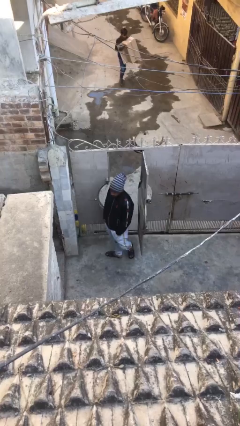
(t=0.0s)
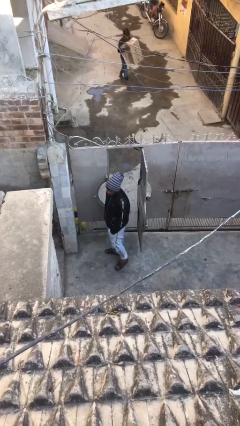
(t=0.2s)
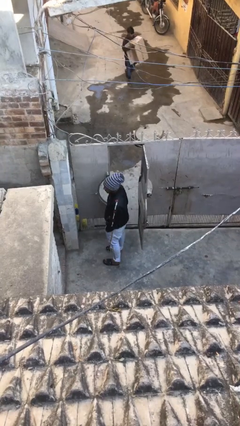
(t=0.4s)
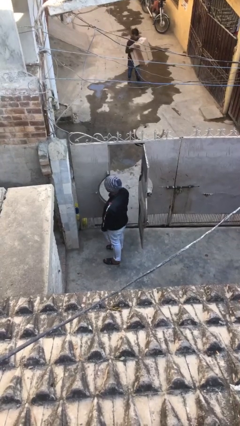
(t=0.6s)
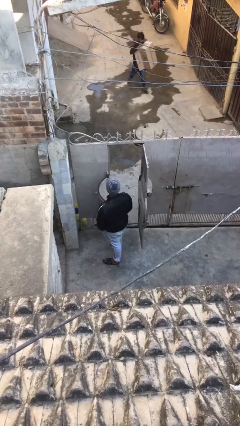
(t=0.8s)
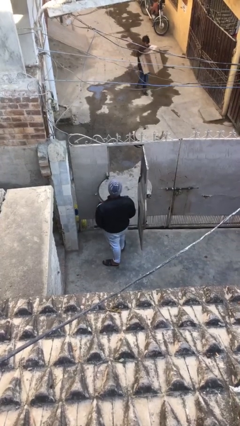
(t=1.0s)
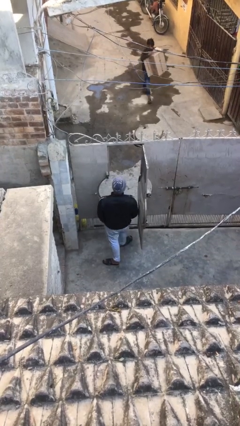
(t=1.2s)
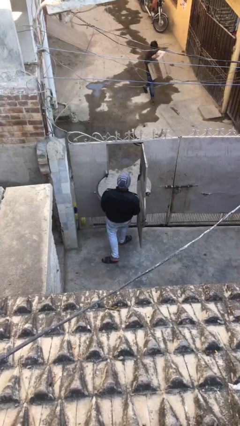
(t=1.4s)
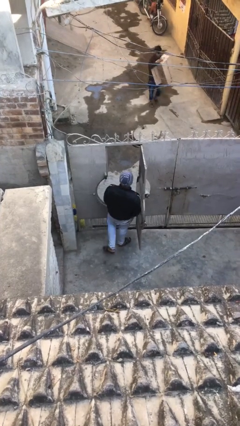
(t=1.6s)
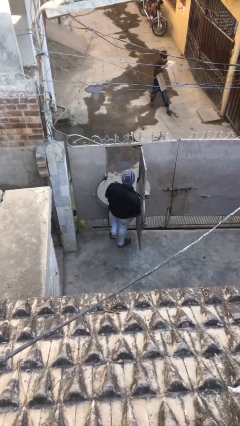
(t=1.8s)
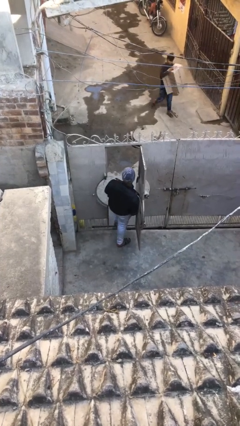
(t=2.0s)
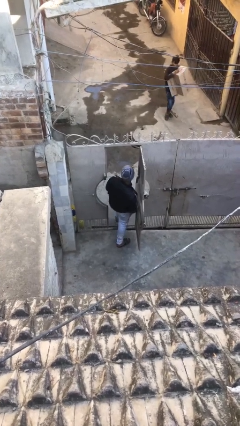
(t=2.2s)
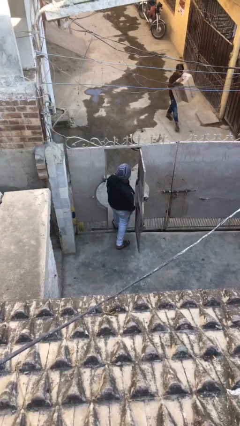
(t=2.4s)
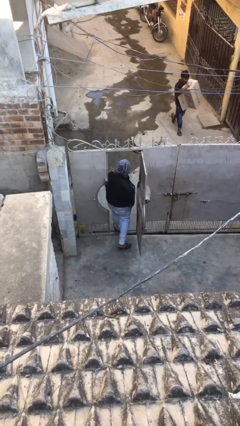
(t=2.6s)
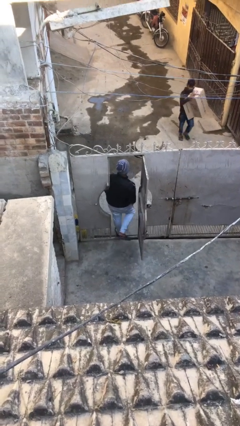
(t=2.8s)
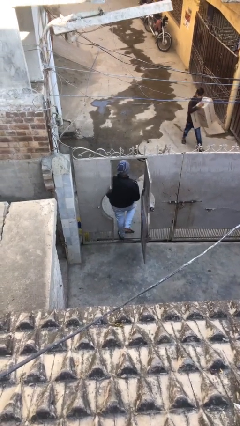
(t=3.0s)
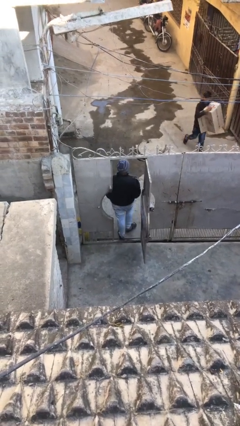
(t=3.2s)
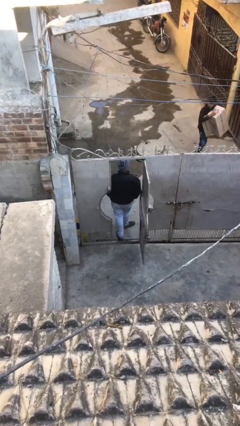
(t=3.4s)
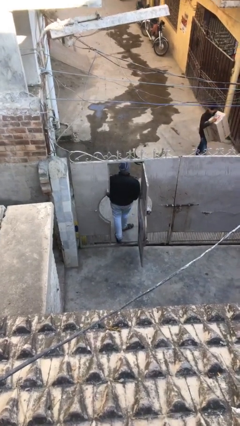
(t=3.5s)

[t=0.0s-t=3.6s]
person exits scene through structure

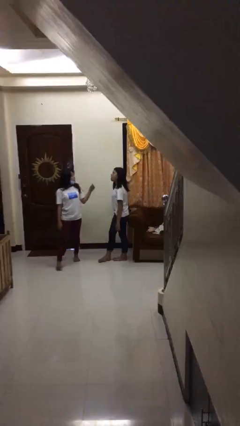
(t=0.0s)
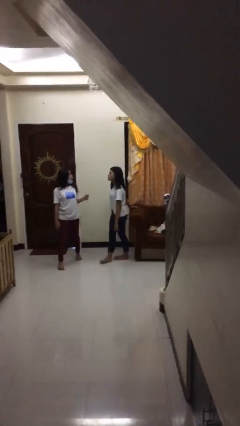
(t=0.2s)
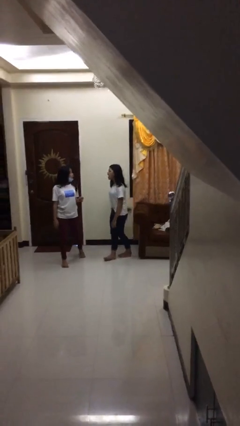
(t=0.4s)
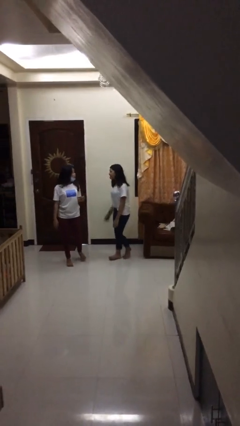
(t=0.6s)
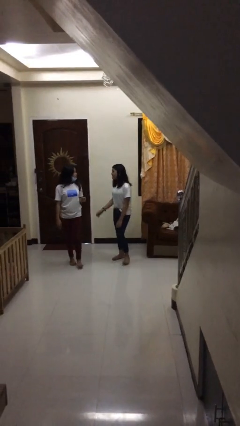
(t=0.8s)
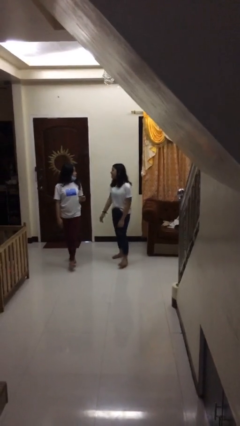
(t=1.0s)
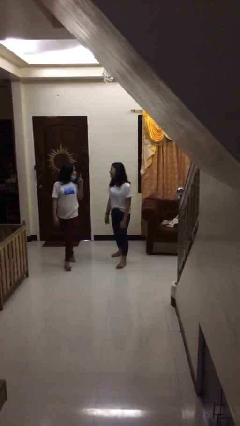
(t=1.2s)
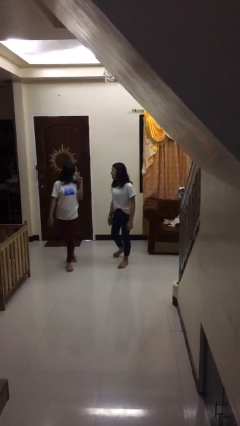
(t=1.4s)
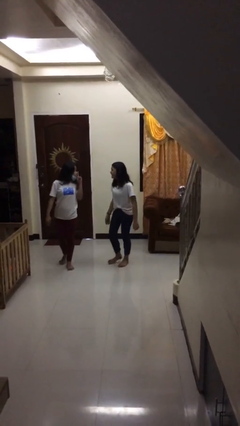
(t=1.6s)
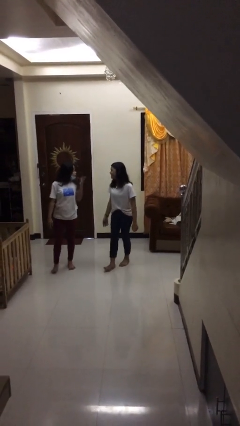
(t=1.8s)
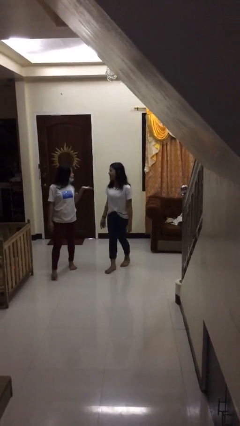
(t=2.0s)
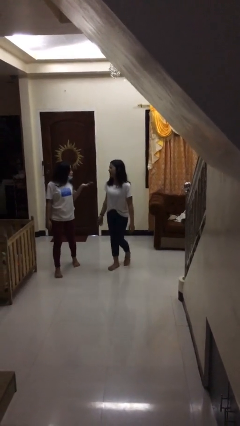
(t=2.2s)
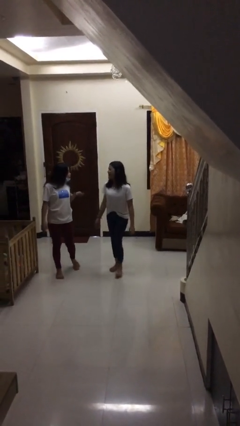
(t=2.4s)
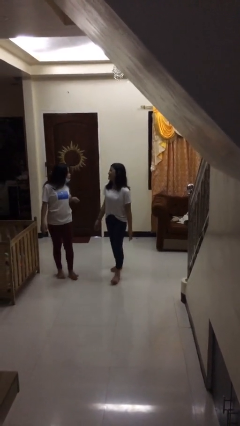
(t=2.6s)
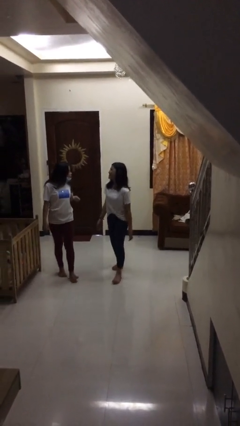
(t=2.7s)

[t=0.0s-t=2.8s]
person talks to person

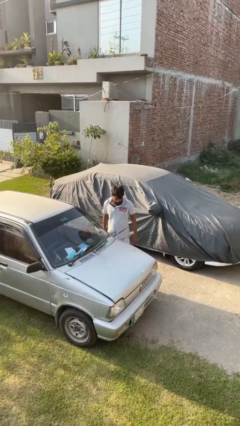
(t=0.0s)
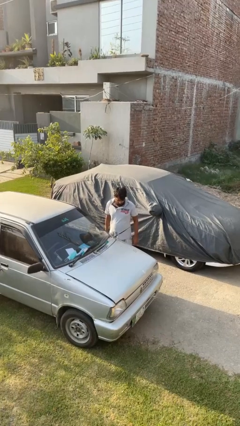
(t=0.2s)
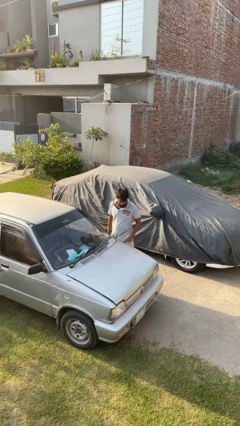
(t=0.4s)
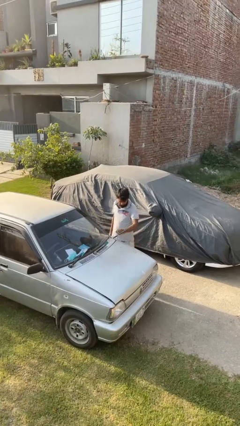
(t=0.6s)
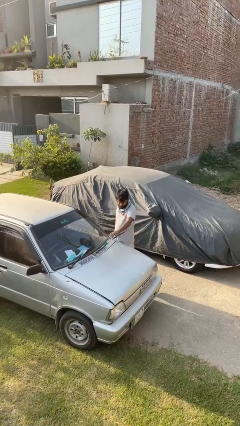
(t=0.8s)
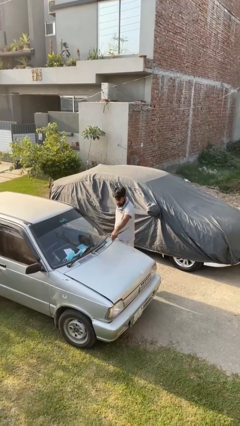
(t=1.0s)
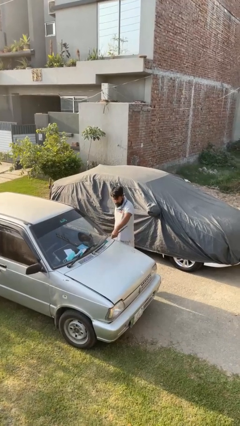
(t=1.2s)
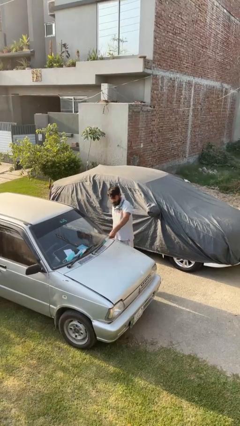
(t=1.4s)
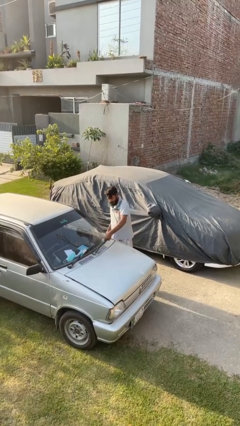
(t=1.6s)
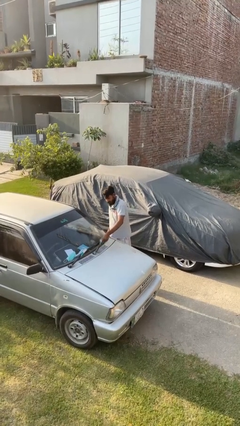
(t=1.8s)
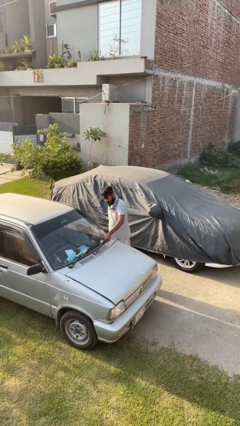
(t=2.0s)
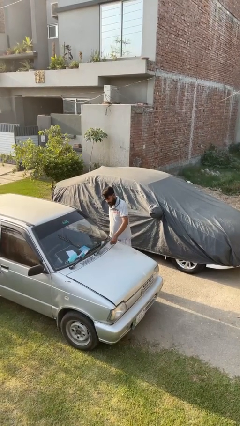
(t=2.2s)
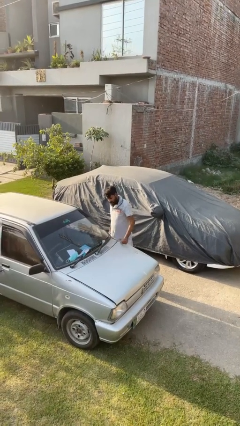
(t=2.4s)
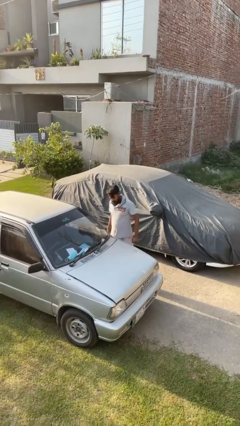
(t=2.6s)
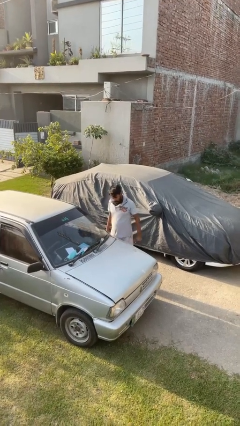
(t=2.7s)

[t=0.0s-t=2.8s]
person flips down car wipers

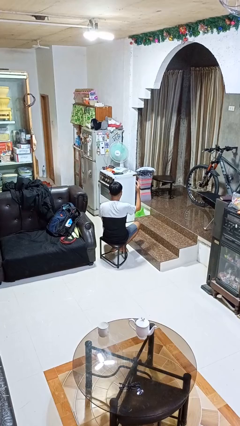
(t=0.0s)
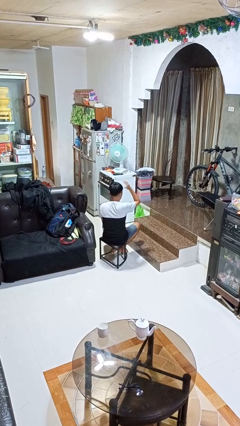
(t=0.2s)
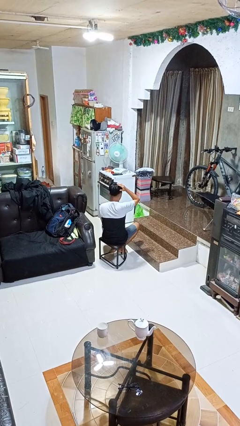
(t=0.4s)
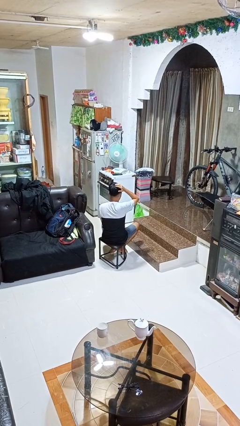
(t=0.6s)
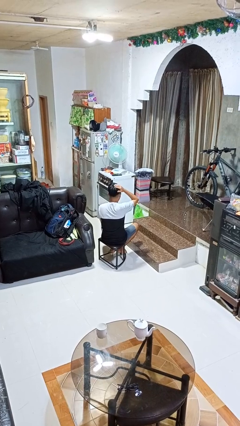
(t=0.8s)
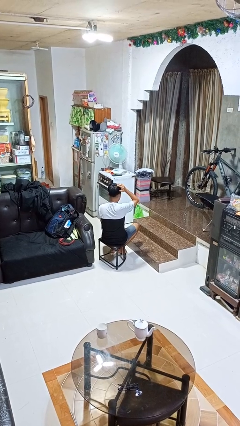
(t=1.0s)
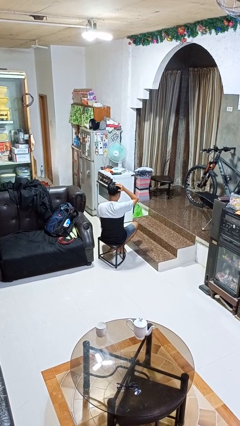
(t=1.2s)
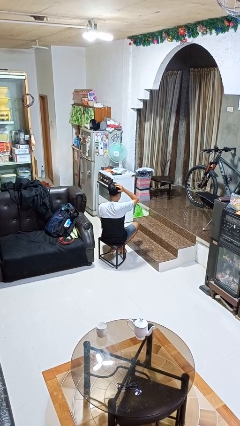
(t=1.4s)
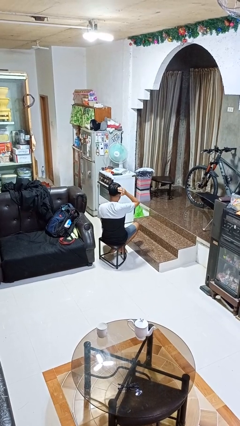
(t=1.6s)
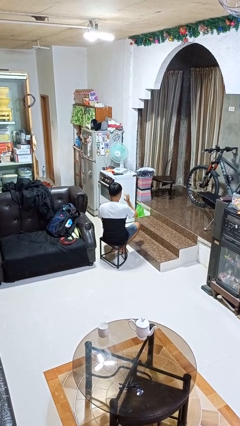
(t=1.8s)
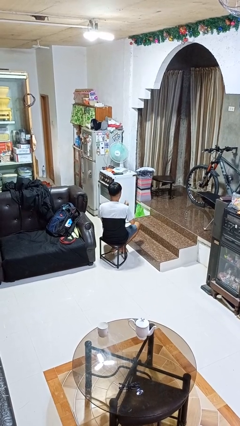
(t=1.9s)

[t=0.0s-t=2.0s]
person pats head

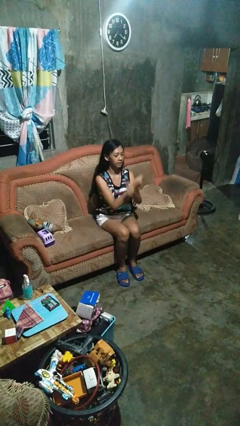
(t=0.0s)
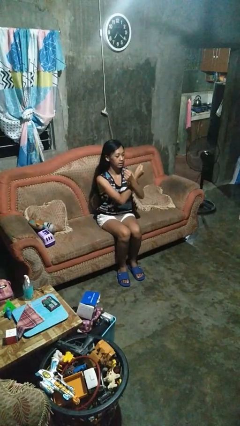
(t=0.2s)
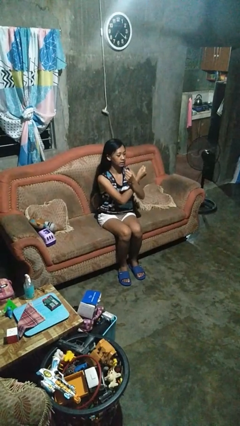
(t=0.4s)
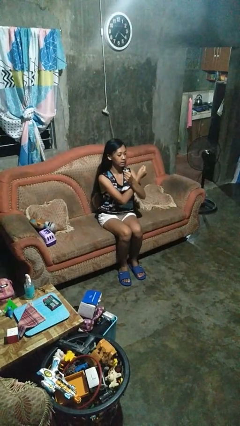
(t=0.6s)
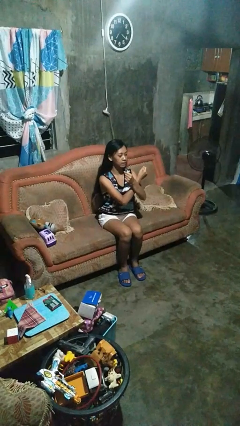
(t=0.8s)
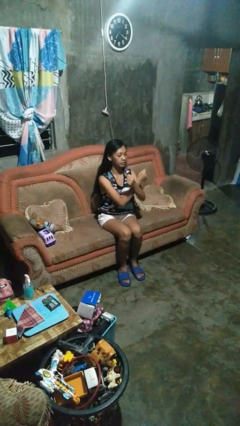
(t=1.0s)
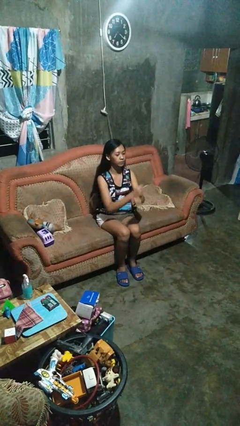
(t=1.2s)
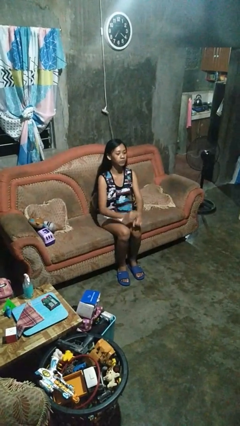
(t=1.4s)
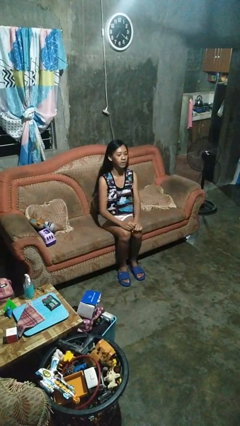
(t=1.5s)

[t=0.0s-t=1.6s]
person gestures arms x

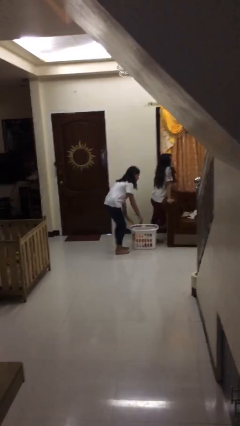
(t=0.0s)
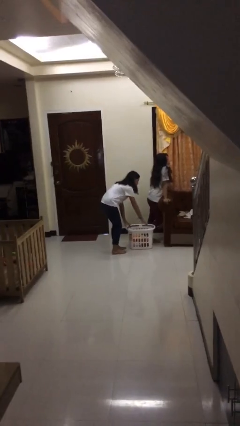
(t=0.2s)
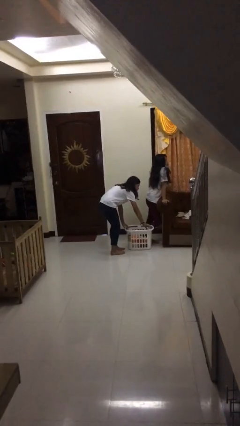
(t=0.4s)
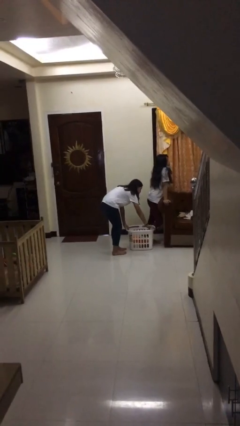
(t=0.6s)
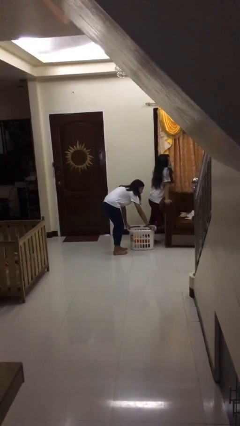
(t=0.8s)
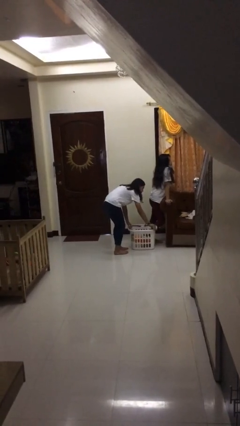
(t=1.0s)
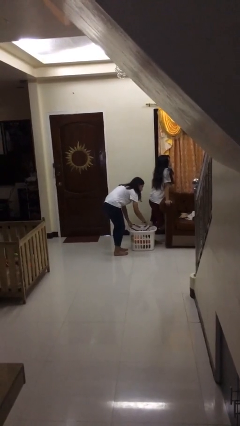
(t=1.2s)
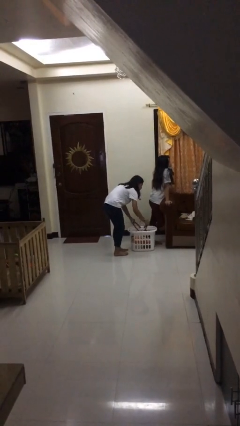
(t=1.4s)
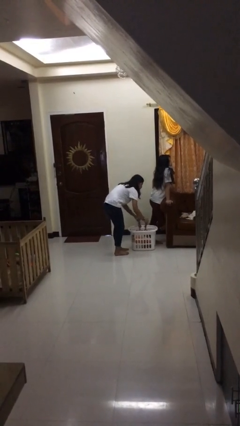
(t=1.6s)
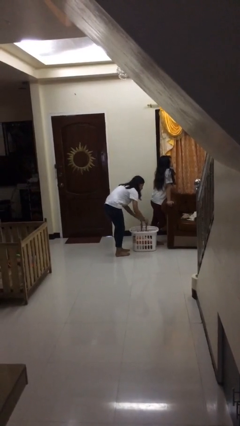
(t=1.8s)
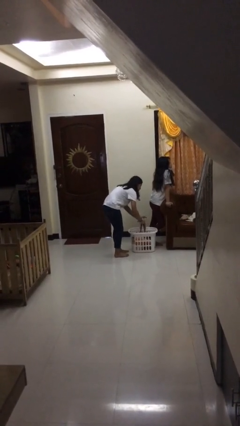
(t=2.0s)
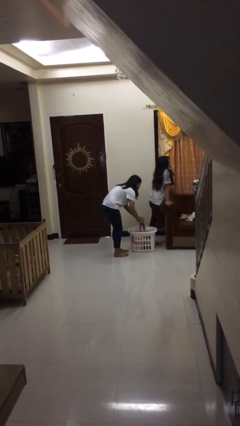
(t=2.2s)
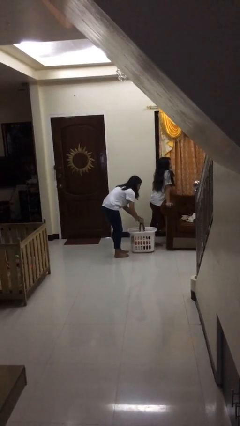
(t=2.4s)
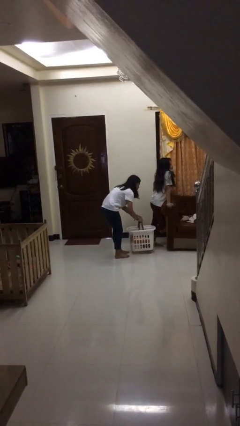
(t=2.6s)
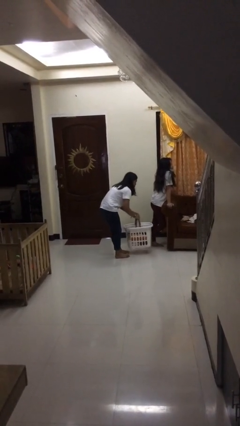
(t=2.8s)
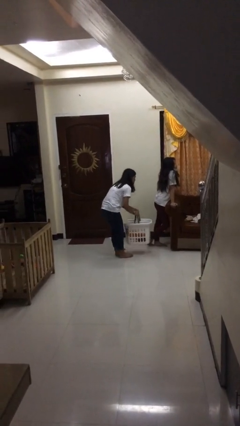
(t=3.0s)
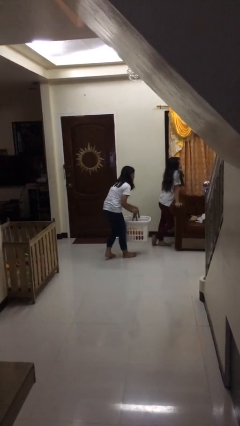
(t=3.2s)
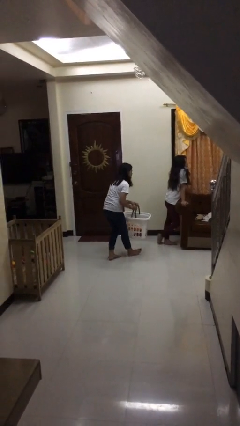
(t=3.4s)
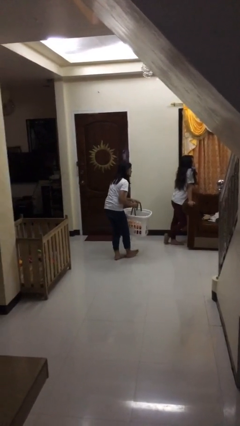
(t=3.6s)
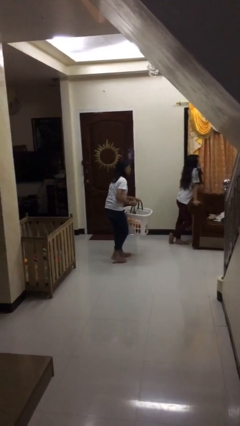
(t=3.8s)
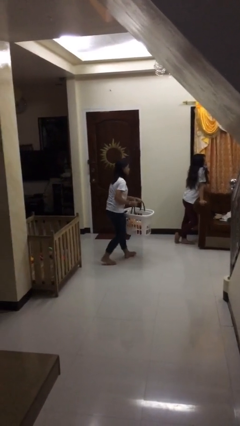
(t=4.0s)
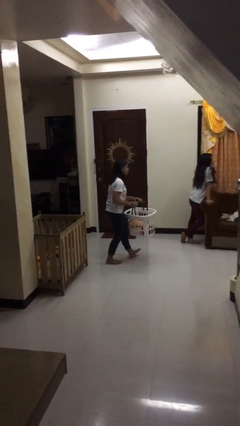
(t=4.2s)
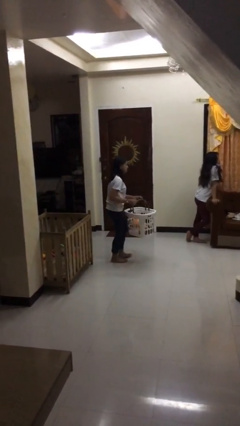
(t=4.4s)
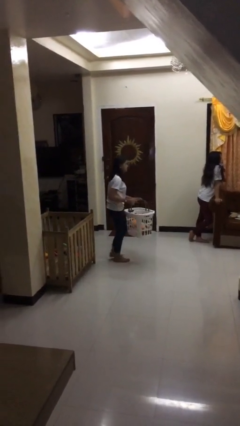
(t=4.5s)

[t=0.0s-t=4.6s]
person steals object from person
